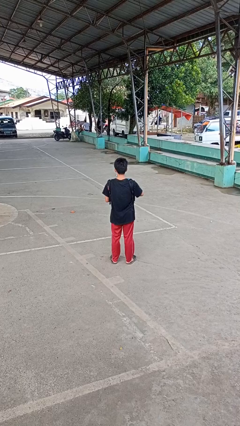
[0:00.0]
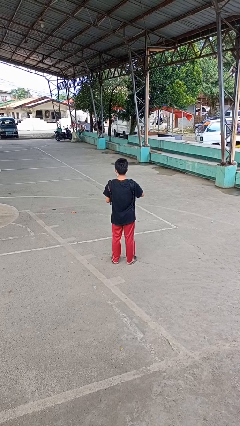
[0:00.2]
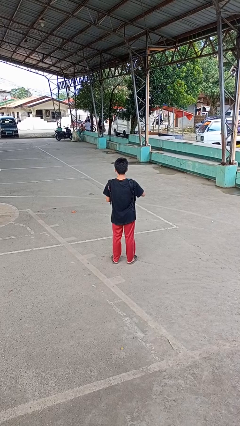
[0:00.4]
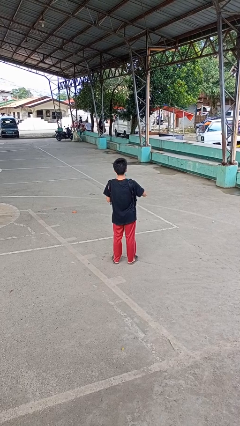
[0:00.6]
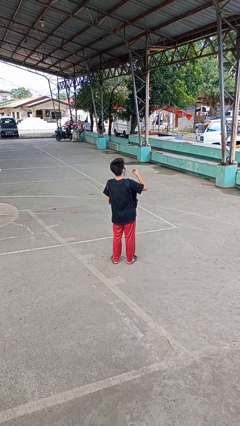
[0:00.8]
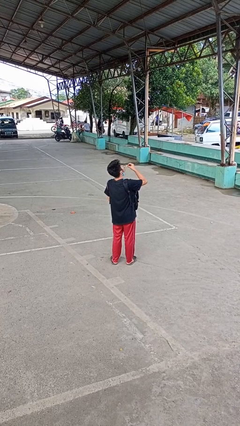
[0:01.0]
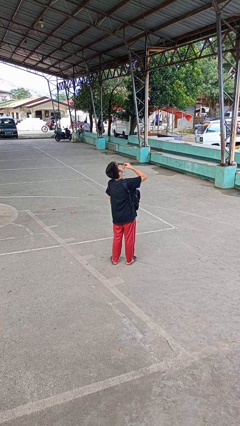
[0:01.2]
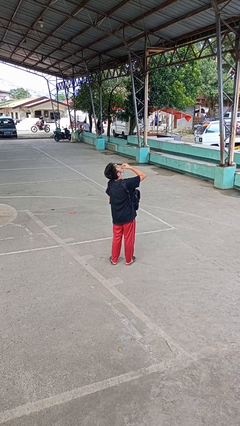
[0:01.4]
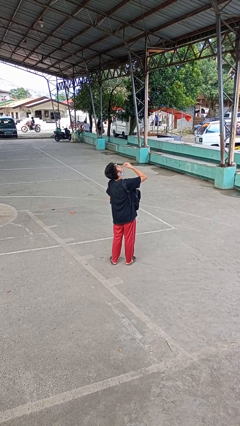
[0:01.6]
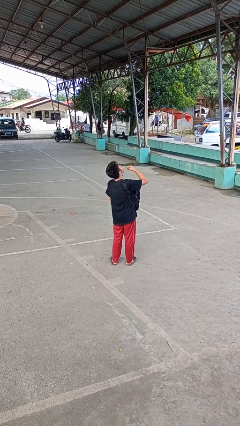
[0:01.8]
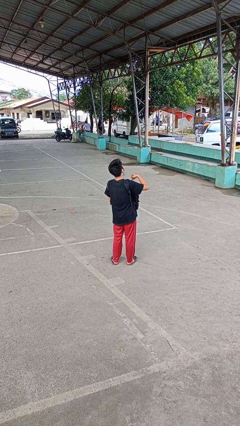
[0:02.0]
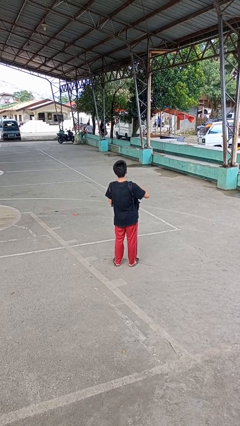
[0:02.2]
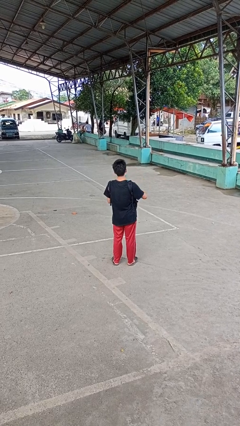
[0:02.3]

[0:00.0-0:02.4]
person eats snack from bag

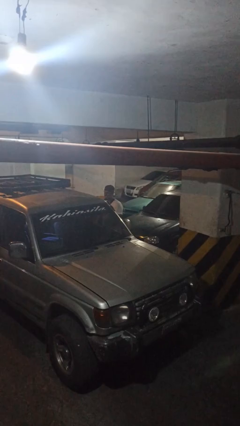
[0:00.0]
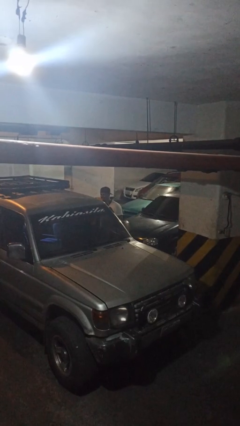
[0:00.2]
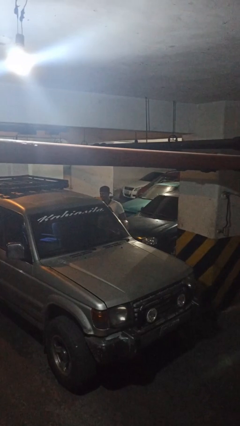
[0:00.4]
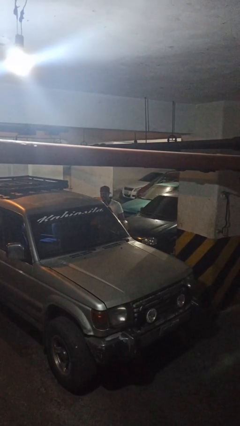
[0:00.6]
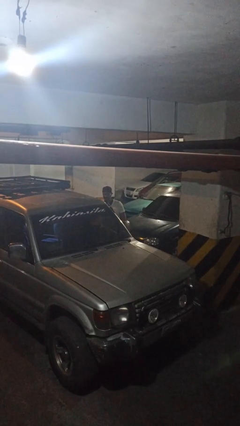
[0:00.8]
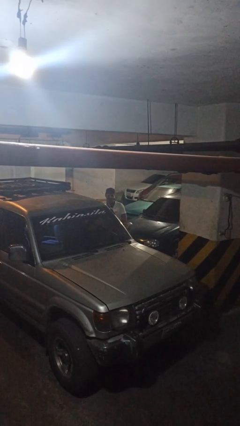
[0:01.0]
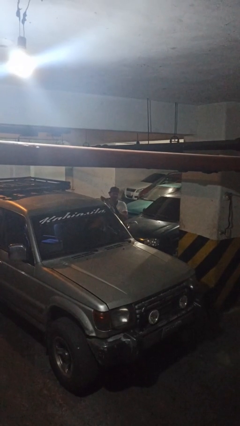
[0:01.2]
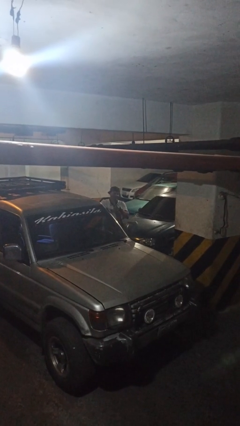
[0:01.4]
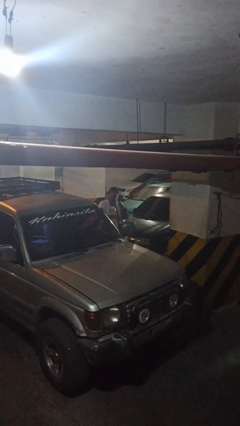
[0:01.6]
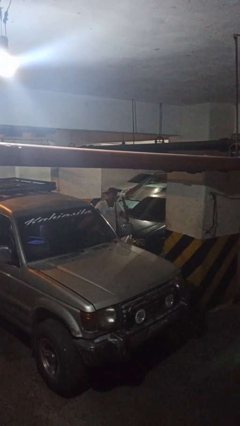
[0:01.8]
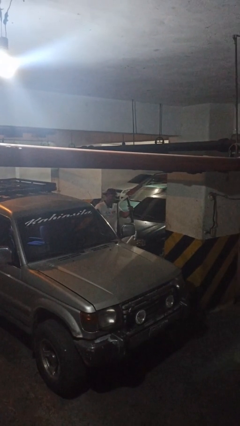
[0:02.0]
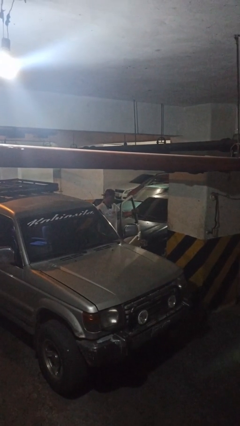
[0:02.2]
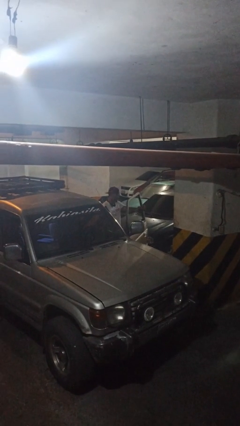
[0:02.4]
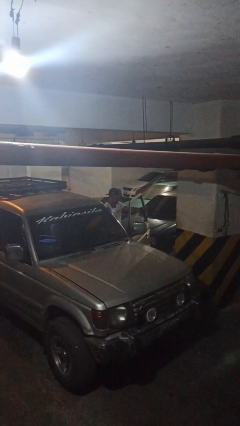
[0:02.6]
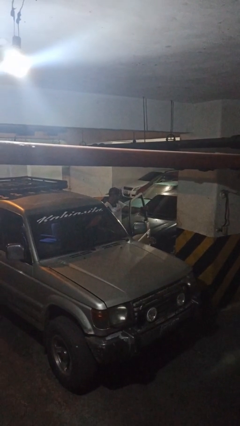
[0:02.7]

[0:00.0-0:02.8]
person opens car door

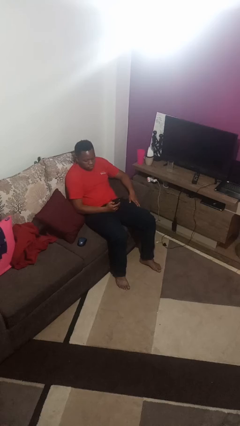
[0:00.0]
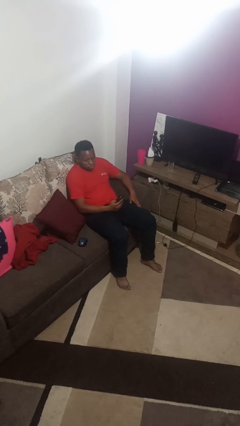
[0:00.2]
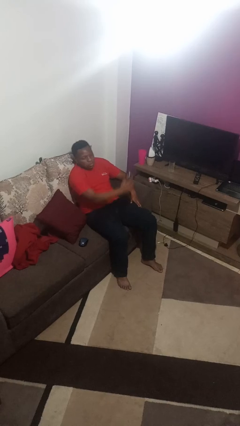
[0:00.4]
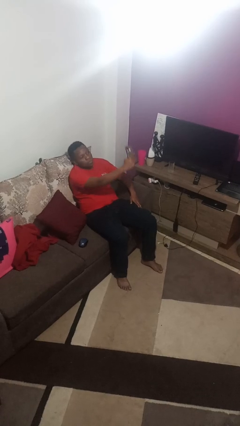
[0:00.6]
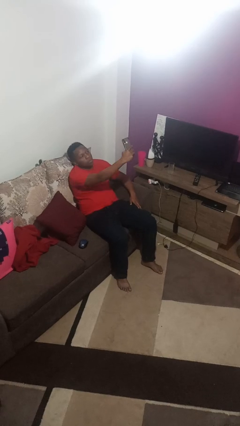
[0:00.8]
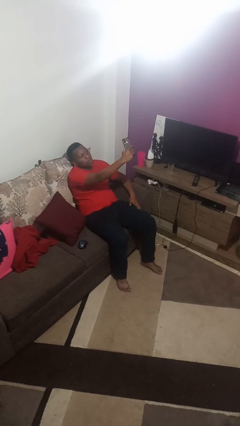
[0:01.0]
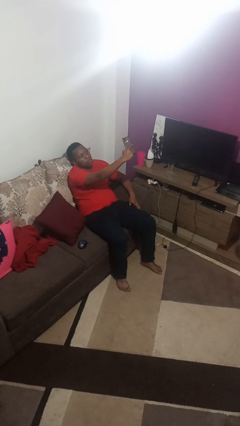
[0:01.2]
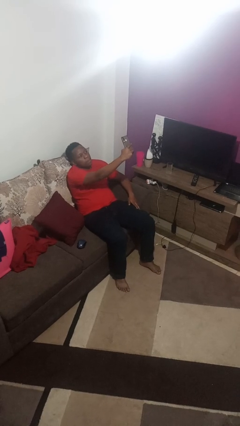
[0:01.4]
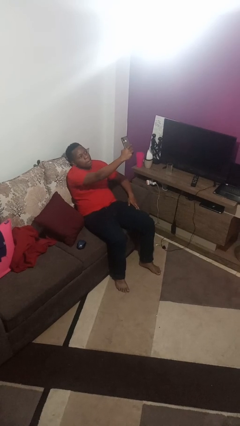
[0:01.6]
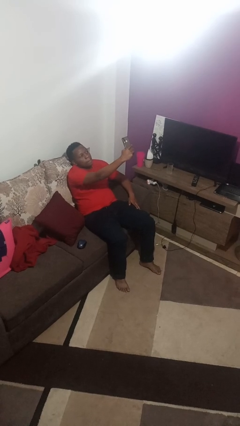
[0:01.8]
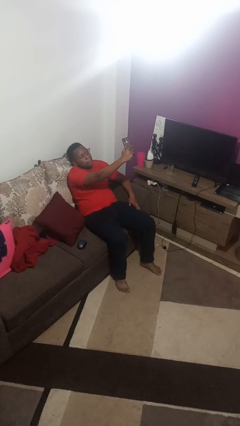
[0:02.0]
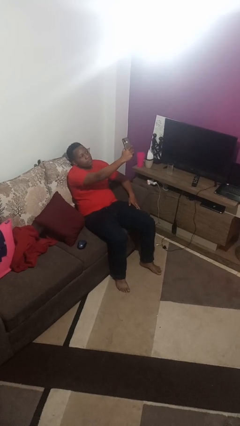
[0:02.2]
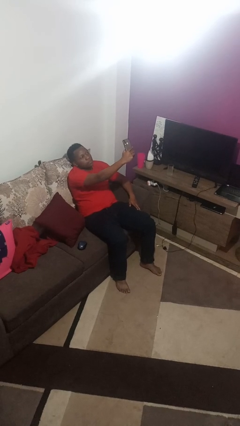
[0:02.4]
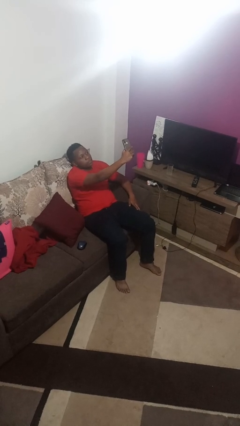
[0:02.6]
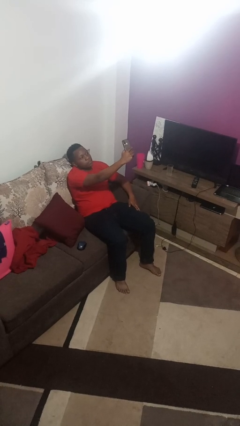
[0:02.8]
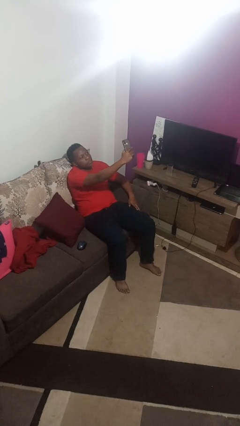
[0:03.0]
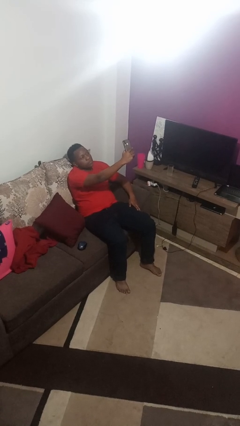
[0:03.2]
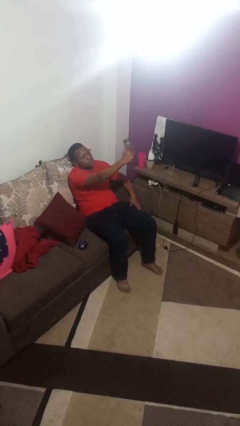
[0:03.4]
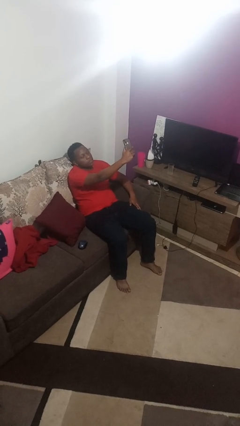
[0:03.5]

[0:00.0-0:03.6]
person takes selfie

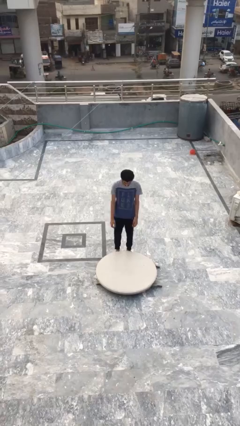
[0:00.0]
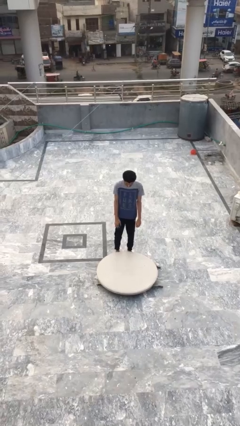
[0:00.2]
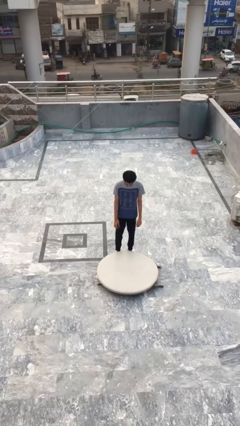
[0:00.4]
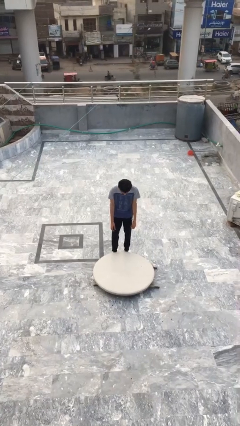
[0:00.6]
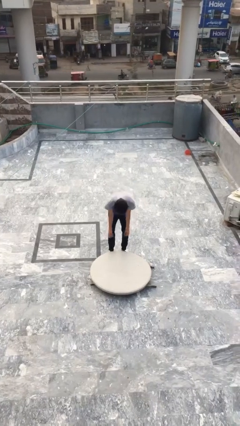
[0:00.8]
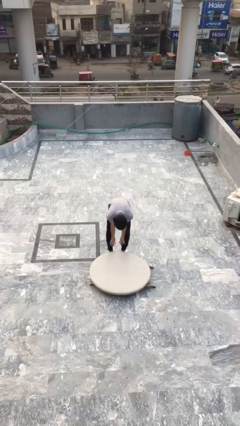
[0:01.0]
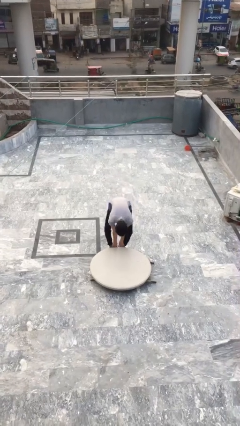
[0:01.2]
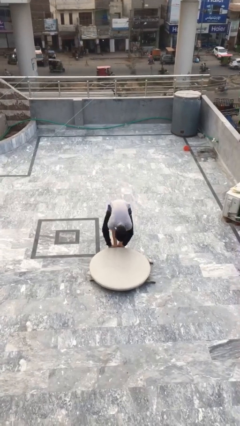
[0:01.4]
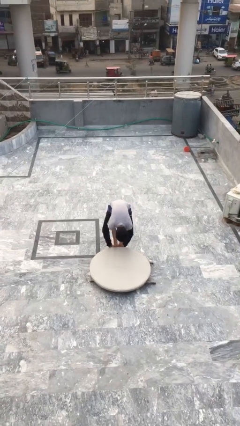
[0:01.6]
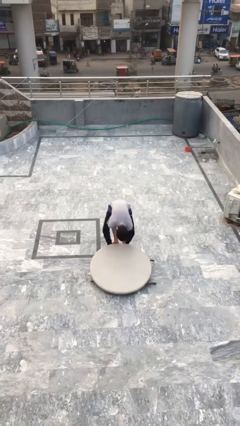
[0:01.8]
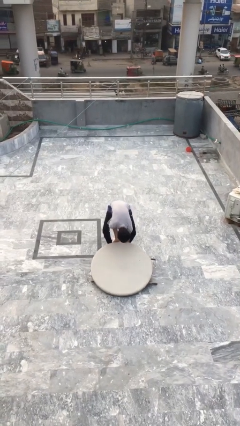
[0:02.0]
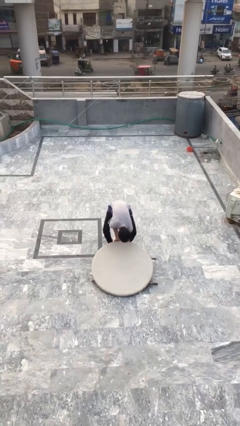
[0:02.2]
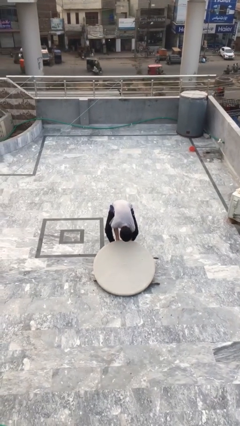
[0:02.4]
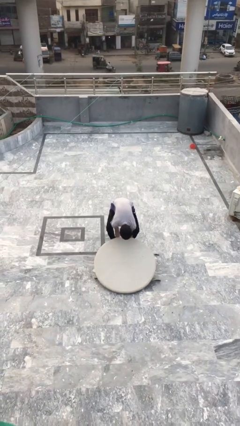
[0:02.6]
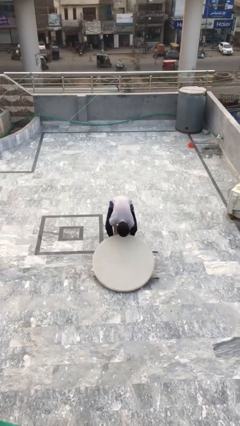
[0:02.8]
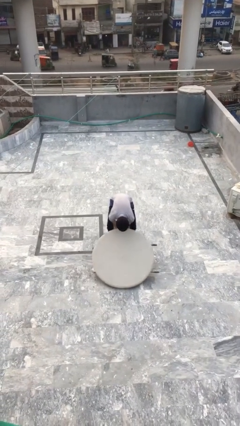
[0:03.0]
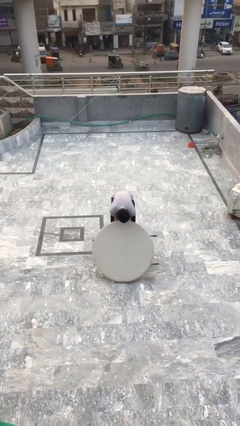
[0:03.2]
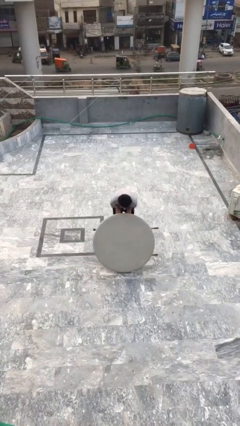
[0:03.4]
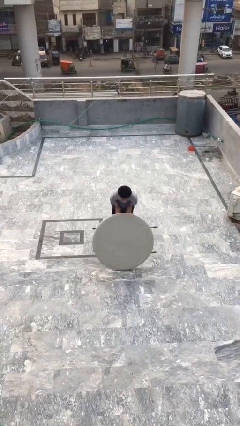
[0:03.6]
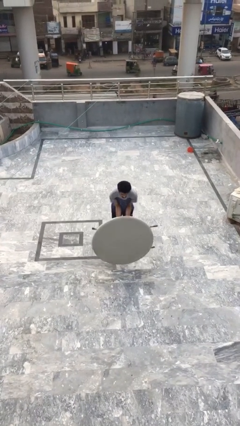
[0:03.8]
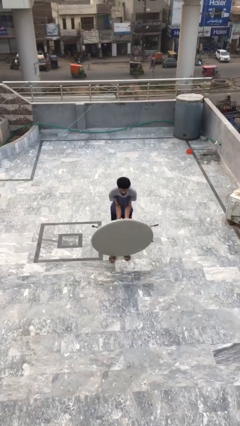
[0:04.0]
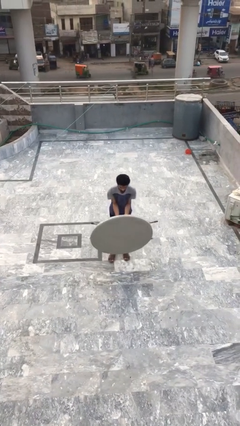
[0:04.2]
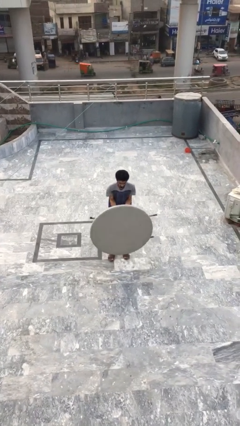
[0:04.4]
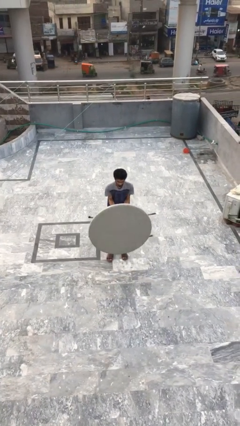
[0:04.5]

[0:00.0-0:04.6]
person picks up object from floor

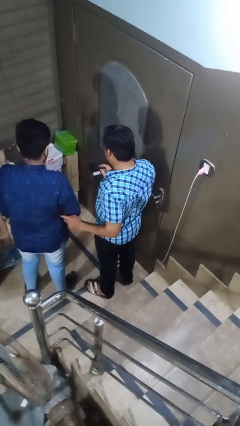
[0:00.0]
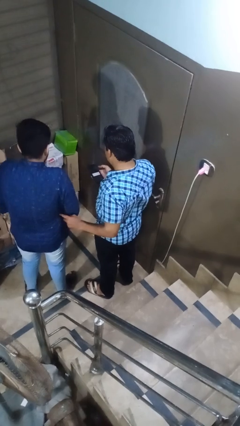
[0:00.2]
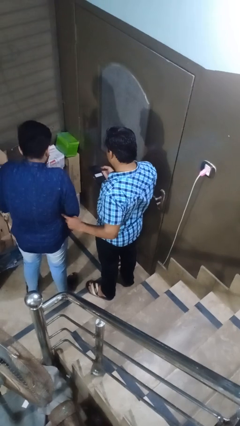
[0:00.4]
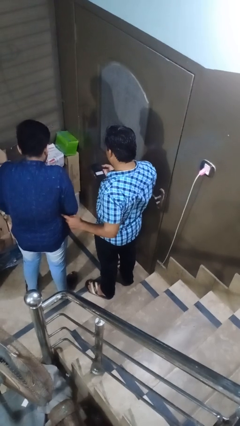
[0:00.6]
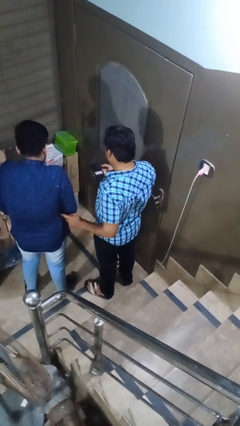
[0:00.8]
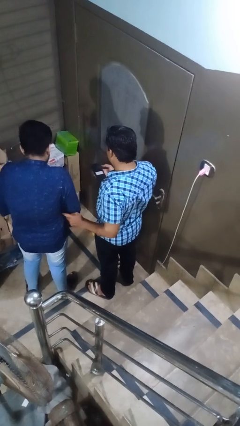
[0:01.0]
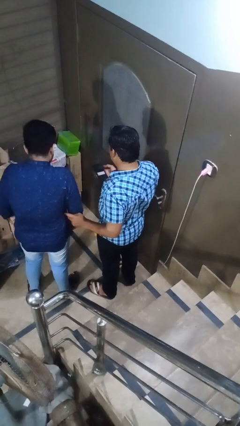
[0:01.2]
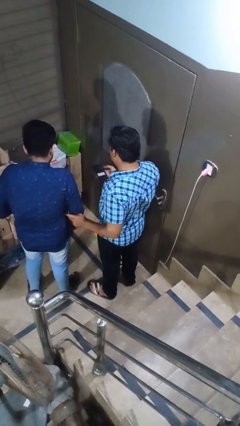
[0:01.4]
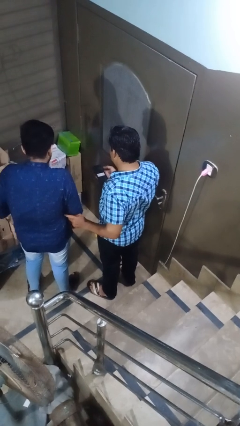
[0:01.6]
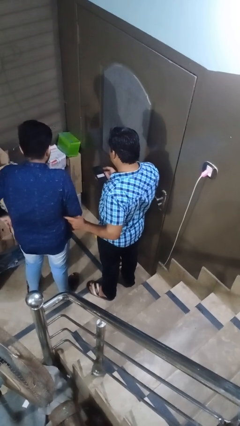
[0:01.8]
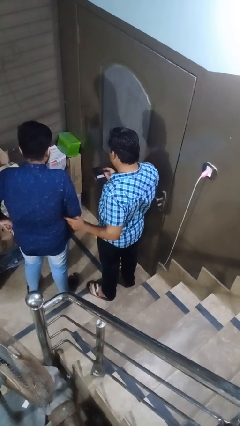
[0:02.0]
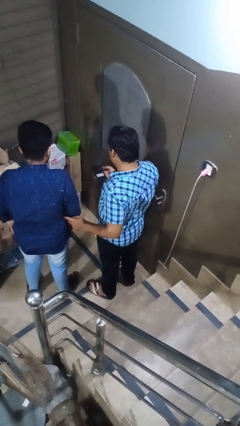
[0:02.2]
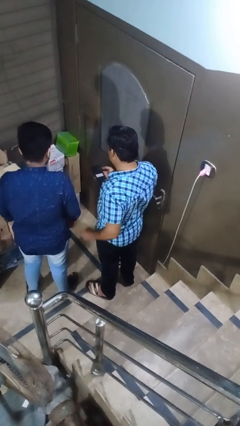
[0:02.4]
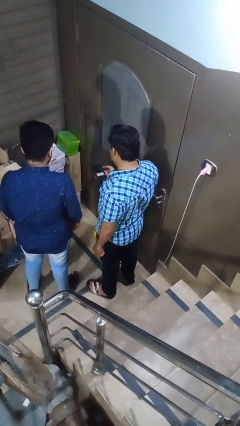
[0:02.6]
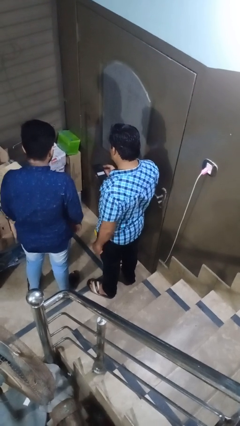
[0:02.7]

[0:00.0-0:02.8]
person tickles person

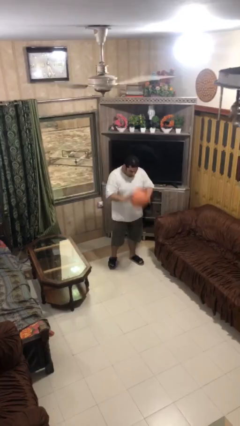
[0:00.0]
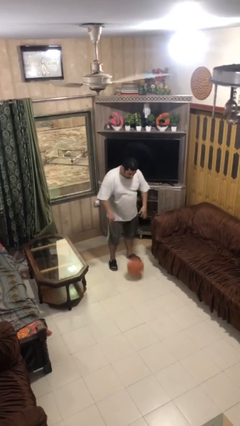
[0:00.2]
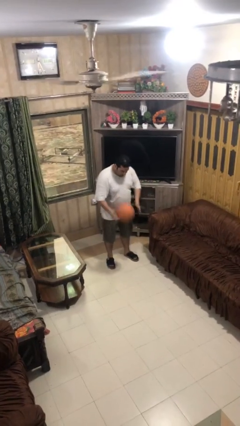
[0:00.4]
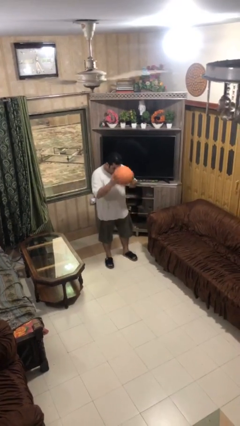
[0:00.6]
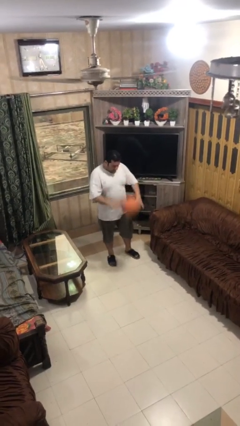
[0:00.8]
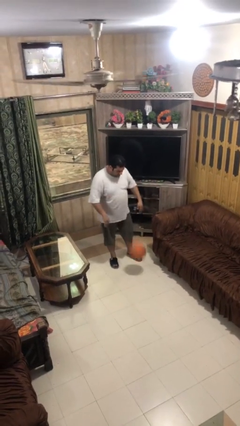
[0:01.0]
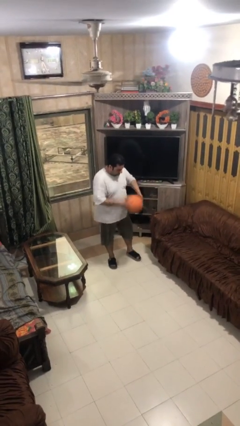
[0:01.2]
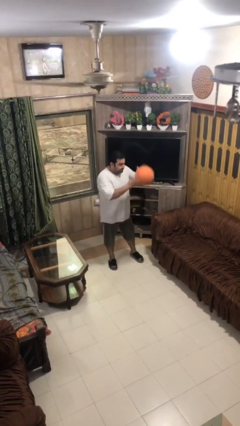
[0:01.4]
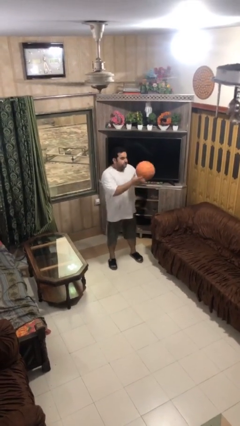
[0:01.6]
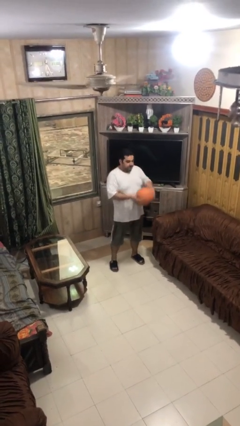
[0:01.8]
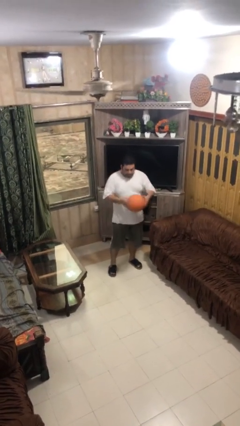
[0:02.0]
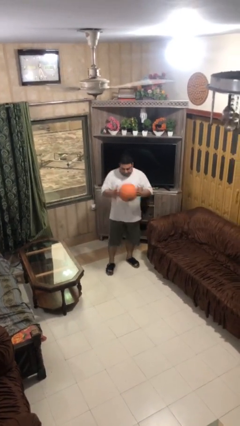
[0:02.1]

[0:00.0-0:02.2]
person bounces ball on floor
